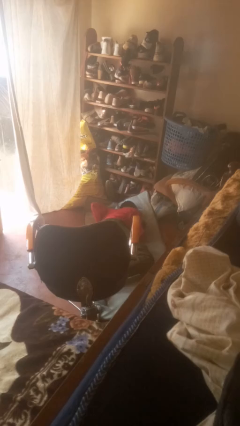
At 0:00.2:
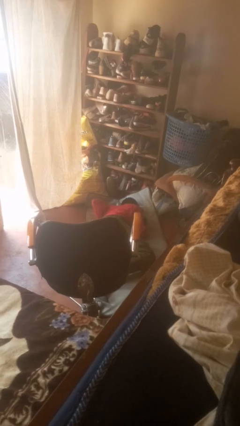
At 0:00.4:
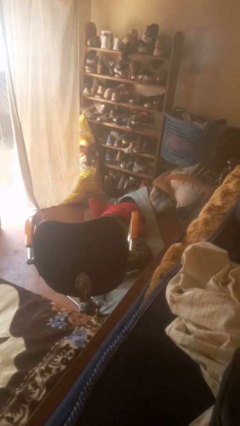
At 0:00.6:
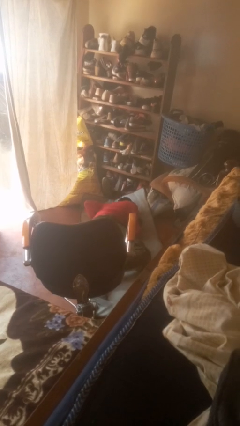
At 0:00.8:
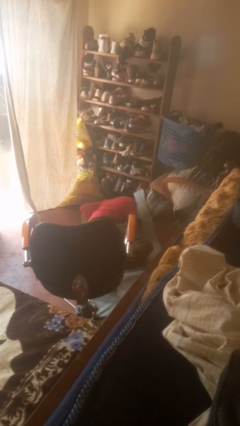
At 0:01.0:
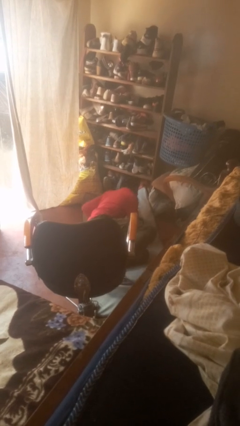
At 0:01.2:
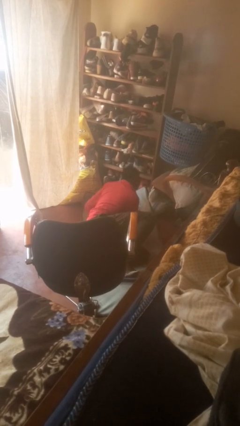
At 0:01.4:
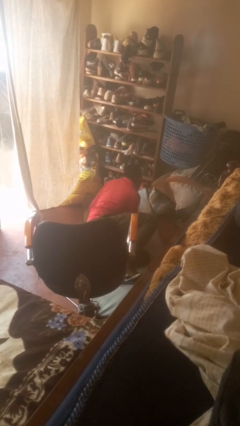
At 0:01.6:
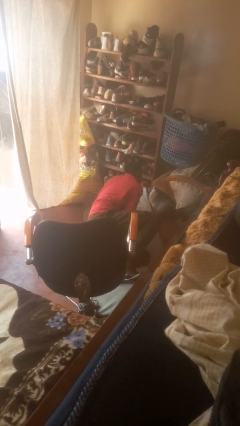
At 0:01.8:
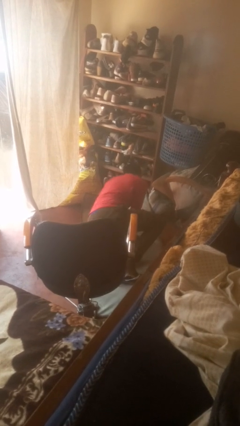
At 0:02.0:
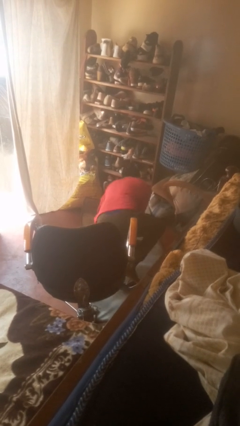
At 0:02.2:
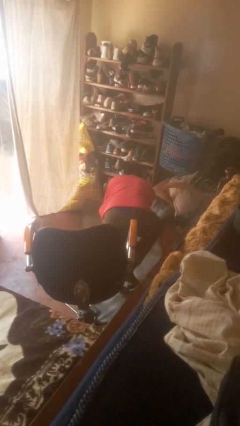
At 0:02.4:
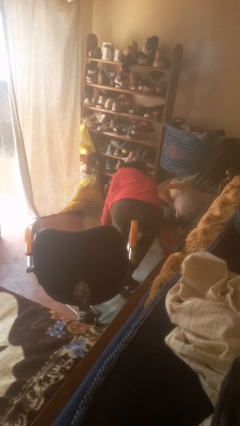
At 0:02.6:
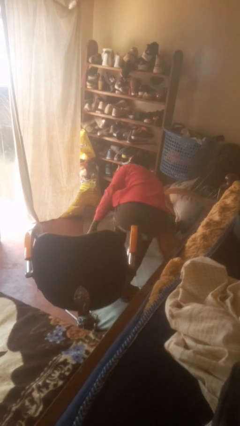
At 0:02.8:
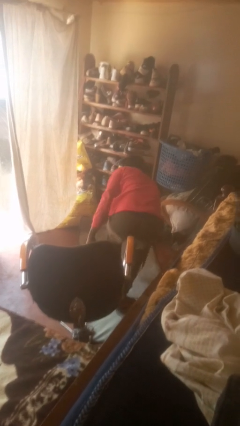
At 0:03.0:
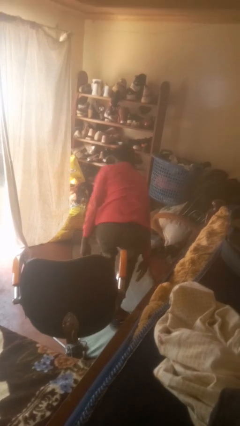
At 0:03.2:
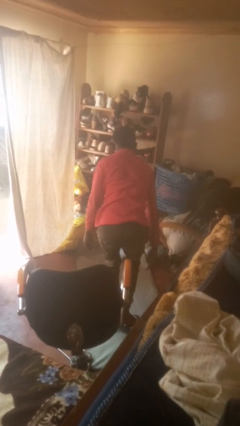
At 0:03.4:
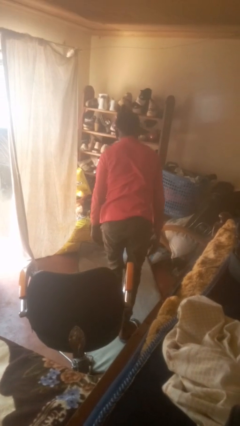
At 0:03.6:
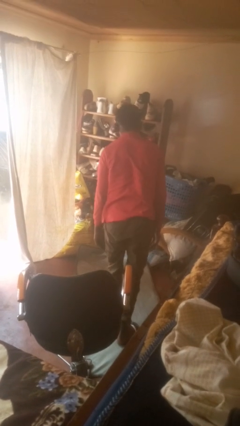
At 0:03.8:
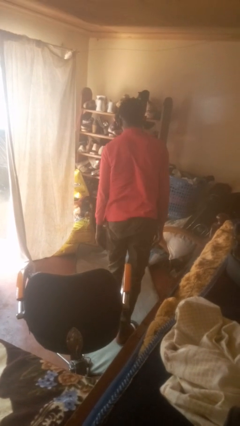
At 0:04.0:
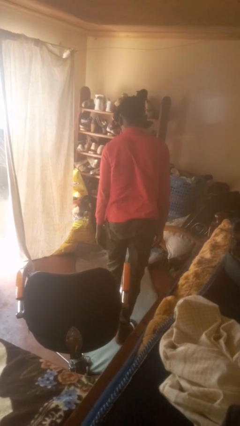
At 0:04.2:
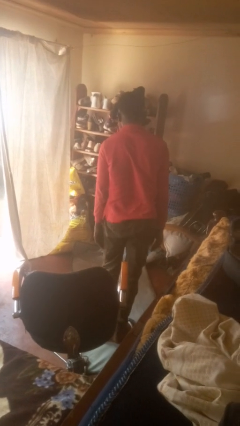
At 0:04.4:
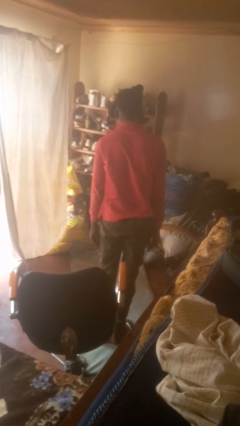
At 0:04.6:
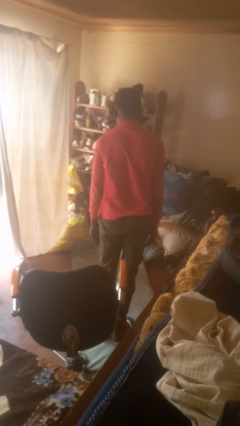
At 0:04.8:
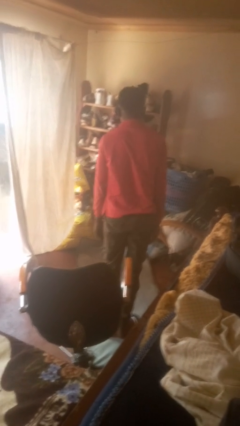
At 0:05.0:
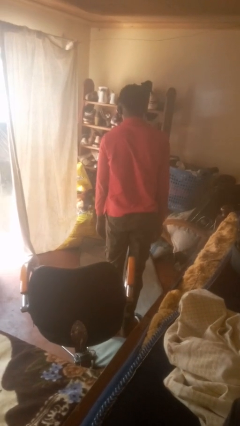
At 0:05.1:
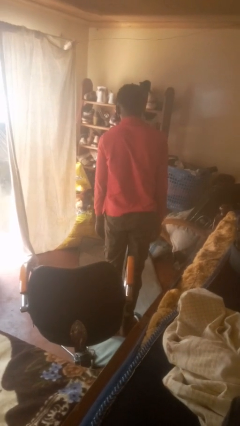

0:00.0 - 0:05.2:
person stands up from floor

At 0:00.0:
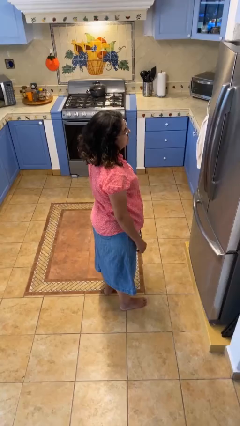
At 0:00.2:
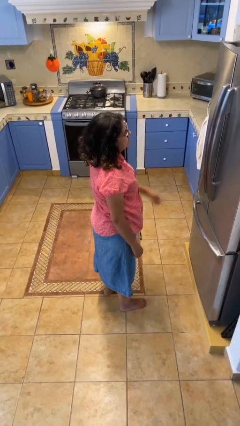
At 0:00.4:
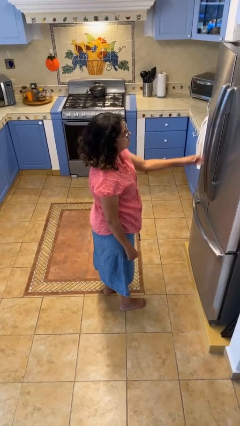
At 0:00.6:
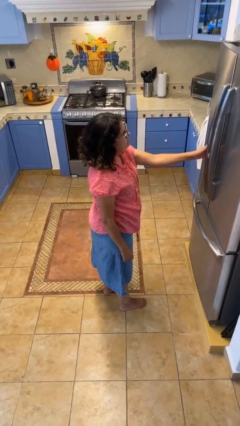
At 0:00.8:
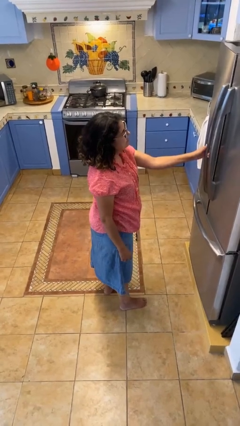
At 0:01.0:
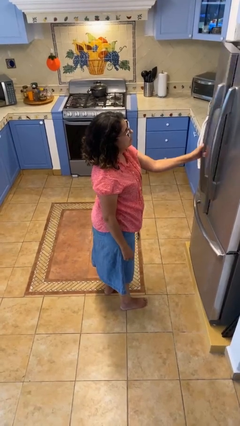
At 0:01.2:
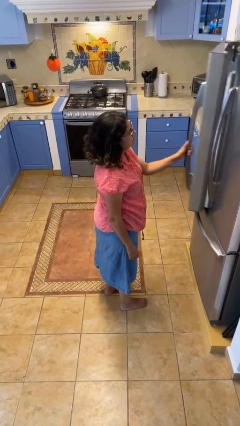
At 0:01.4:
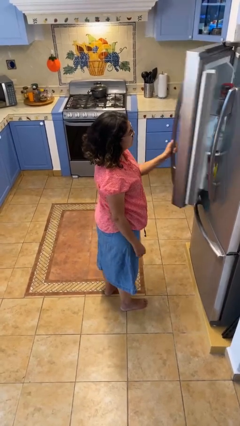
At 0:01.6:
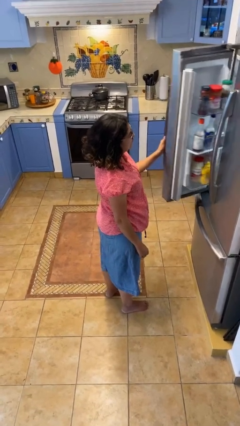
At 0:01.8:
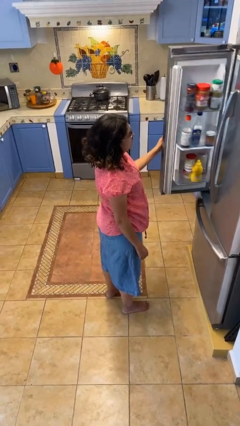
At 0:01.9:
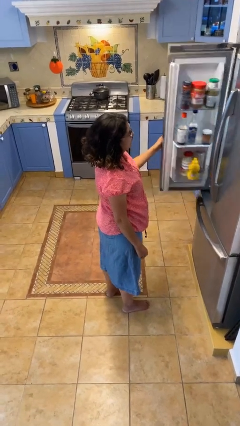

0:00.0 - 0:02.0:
person opens refrigerator

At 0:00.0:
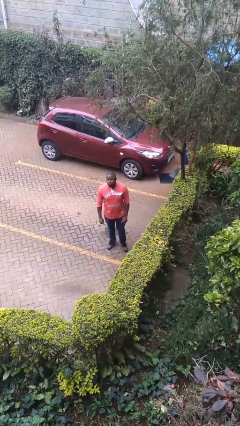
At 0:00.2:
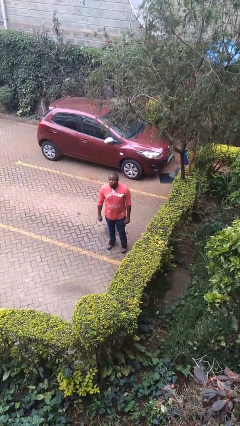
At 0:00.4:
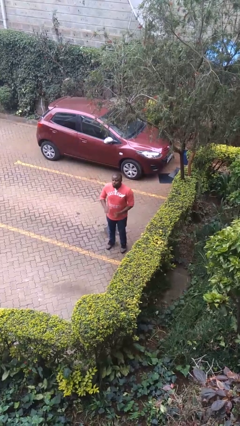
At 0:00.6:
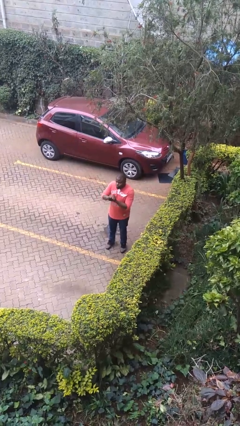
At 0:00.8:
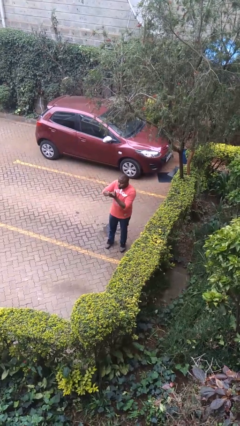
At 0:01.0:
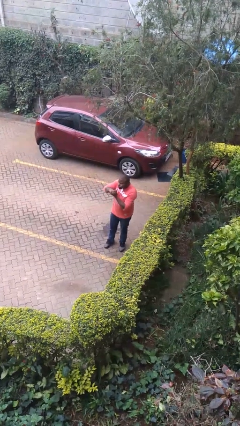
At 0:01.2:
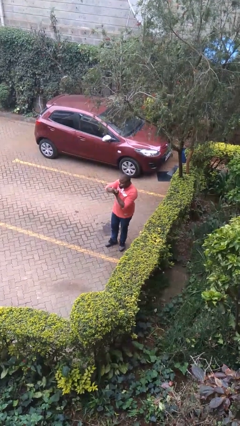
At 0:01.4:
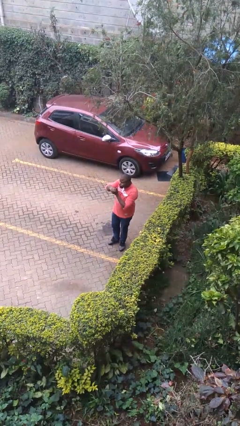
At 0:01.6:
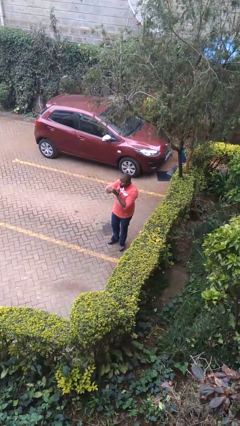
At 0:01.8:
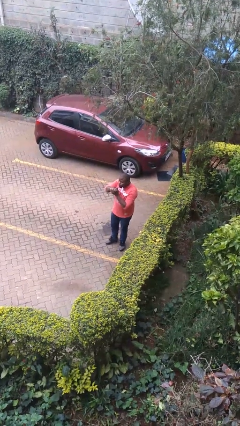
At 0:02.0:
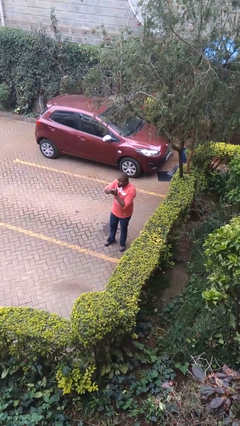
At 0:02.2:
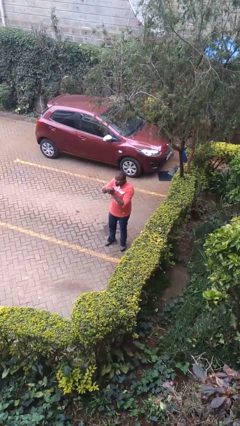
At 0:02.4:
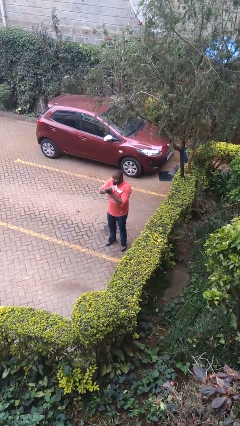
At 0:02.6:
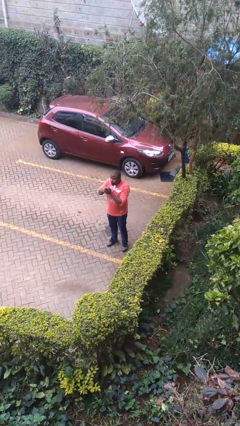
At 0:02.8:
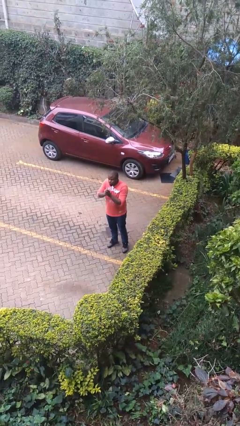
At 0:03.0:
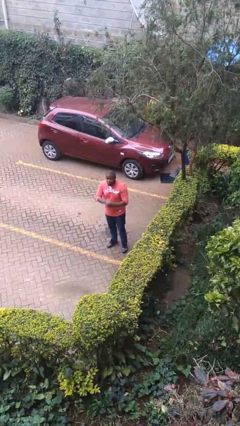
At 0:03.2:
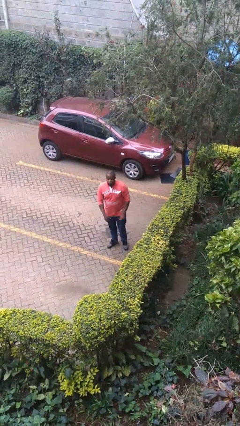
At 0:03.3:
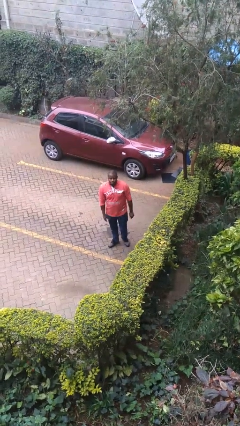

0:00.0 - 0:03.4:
person blows into hands

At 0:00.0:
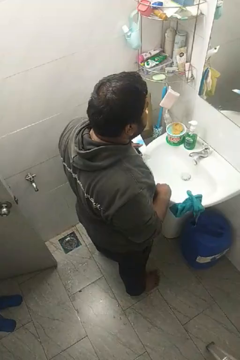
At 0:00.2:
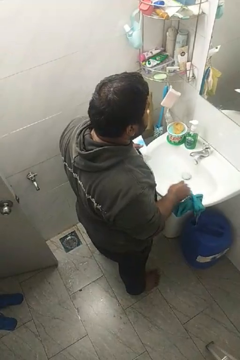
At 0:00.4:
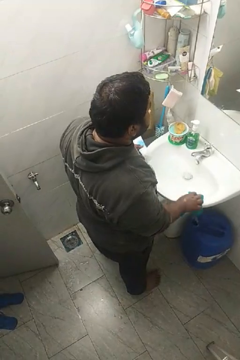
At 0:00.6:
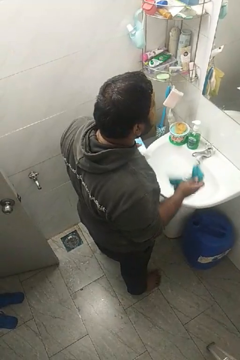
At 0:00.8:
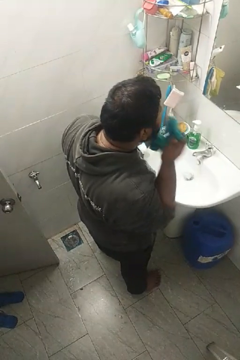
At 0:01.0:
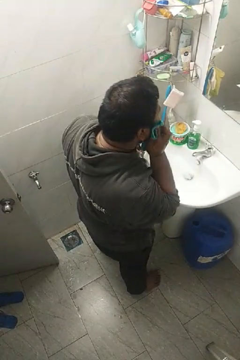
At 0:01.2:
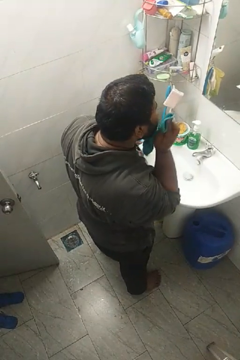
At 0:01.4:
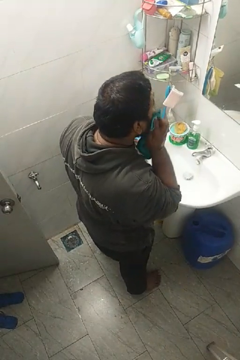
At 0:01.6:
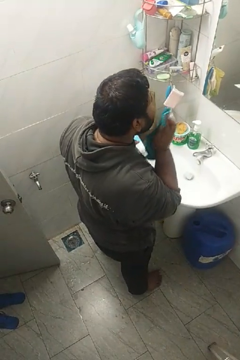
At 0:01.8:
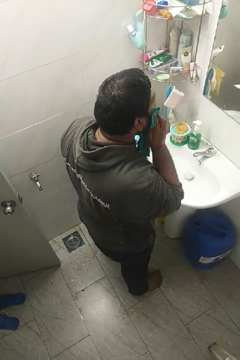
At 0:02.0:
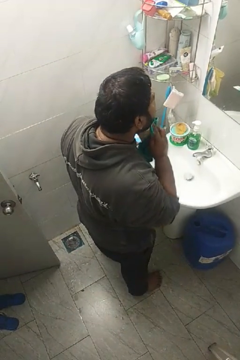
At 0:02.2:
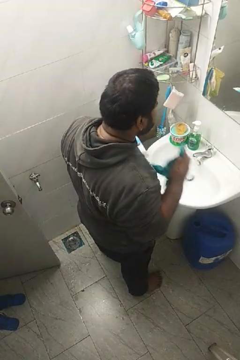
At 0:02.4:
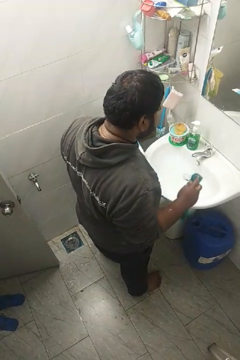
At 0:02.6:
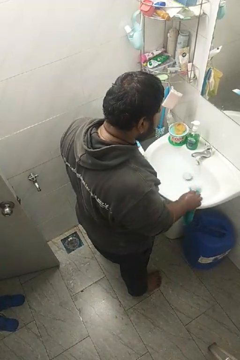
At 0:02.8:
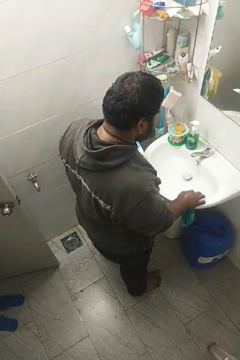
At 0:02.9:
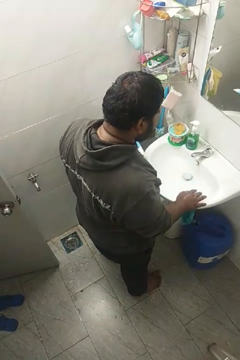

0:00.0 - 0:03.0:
person dries face with towel

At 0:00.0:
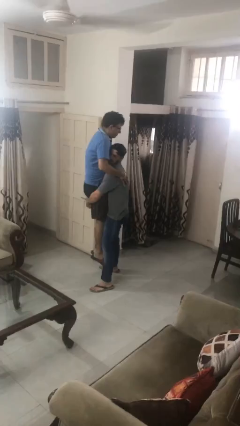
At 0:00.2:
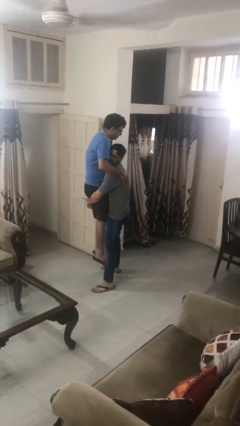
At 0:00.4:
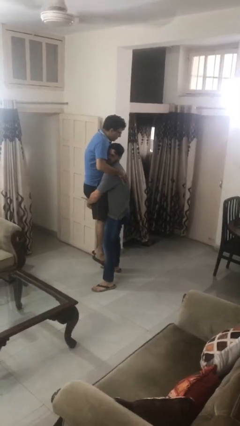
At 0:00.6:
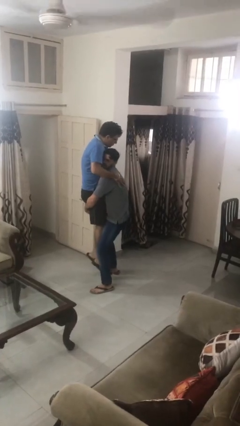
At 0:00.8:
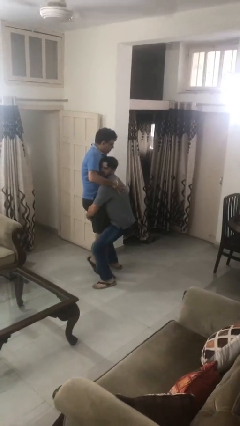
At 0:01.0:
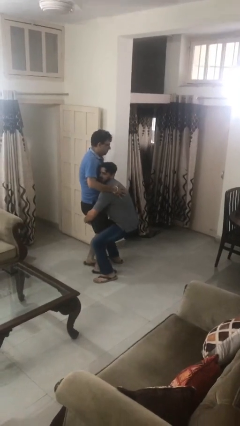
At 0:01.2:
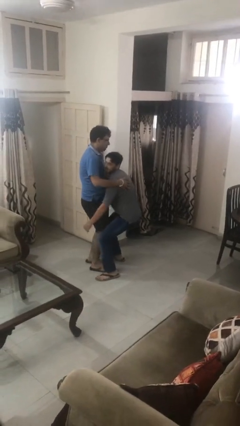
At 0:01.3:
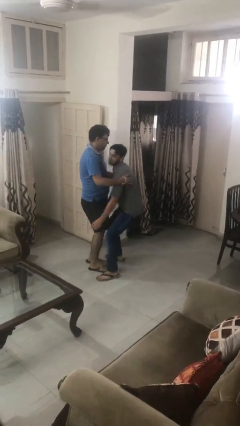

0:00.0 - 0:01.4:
person puts down person

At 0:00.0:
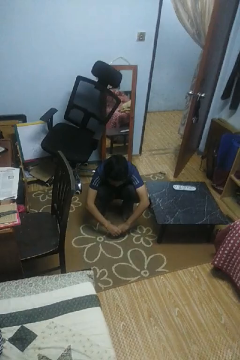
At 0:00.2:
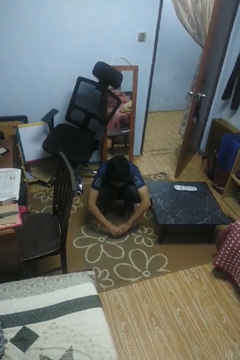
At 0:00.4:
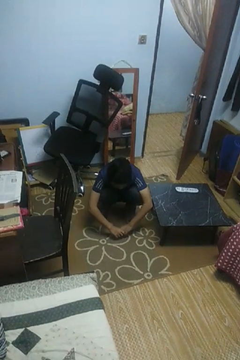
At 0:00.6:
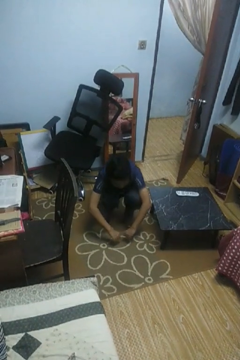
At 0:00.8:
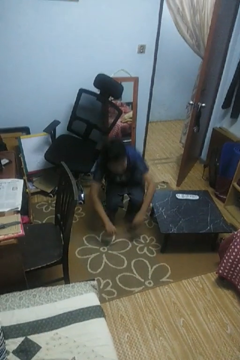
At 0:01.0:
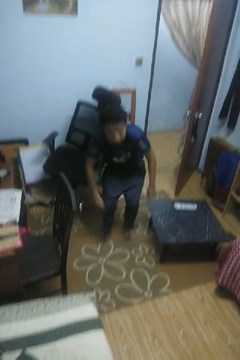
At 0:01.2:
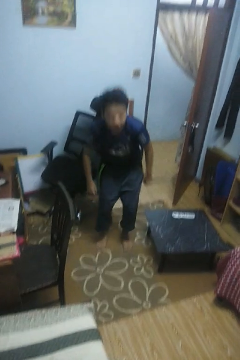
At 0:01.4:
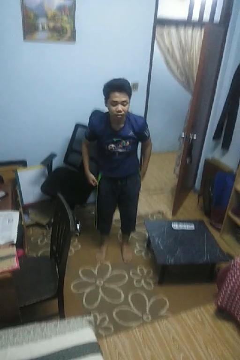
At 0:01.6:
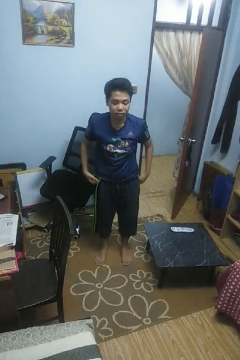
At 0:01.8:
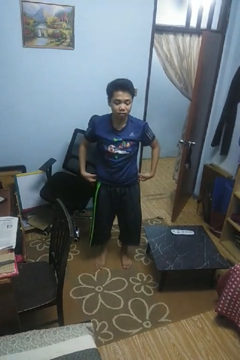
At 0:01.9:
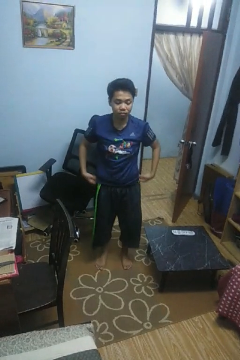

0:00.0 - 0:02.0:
person stands up

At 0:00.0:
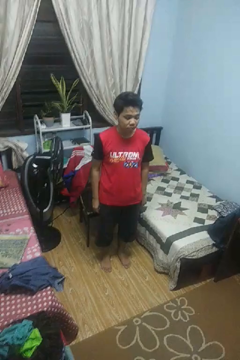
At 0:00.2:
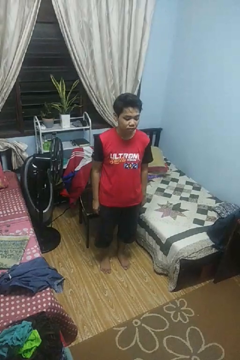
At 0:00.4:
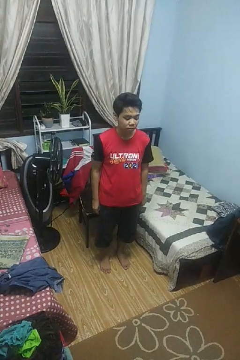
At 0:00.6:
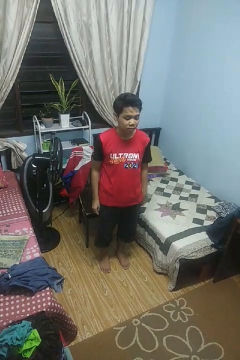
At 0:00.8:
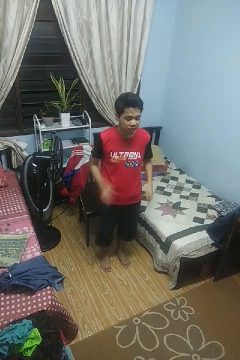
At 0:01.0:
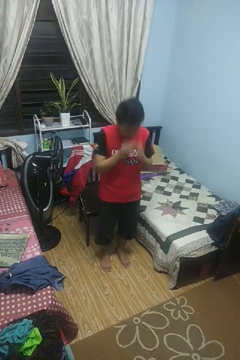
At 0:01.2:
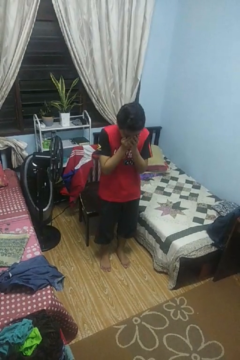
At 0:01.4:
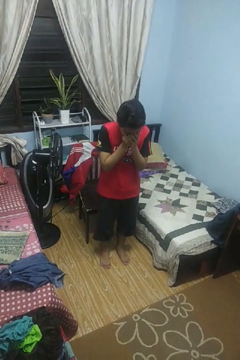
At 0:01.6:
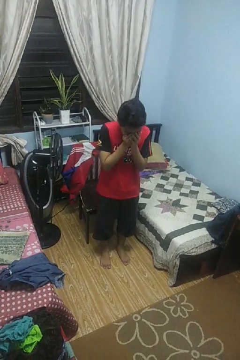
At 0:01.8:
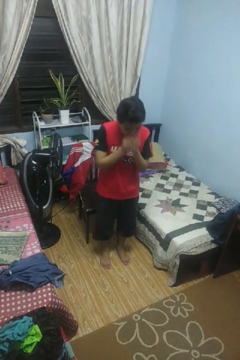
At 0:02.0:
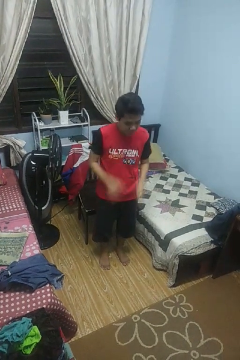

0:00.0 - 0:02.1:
person sneezes into hand
